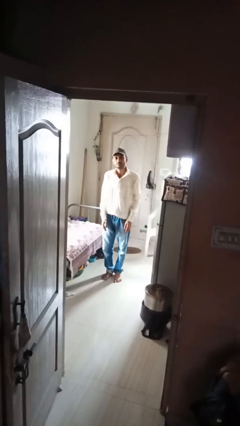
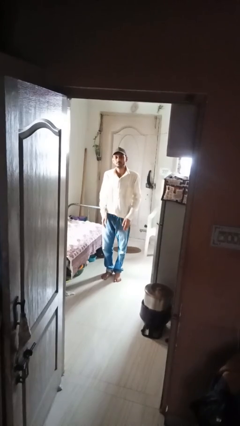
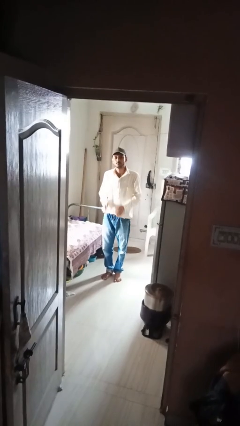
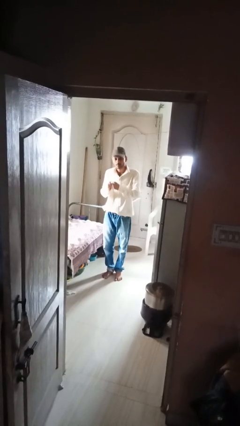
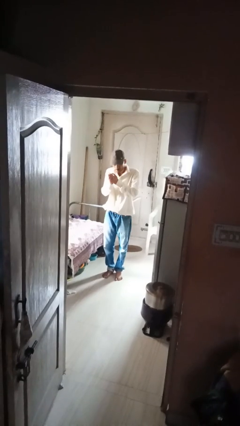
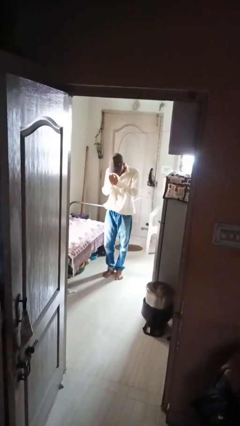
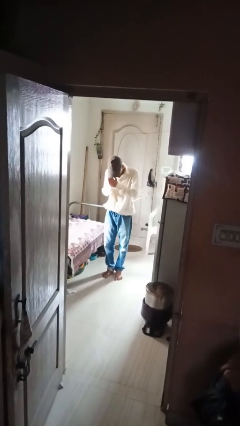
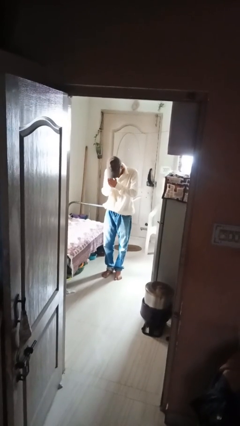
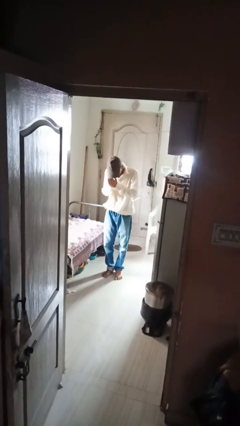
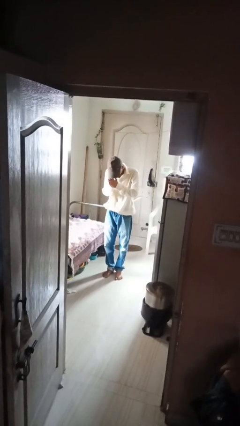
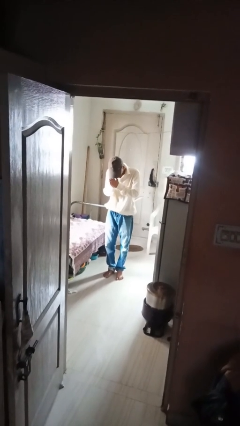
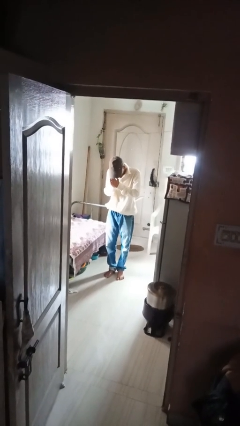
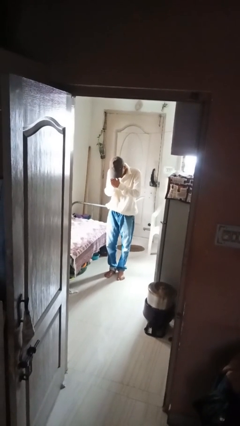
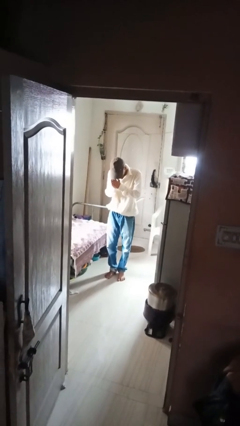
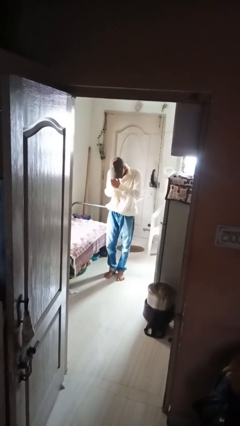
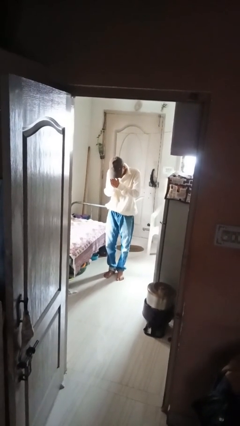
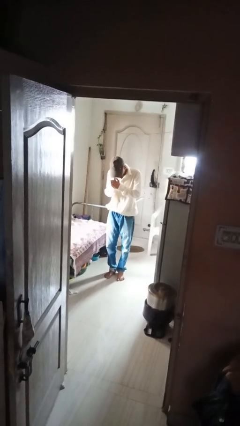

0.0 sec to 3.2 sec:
person prays

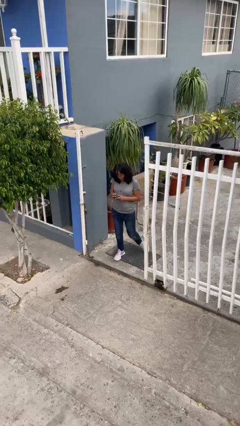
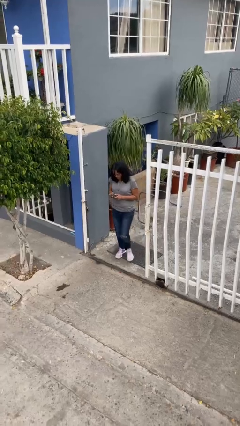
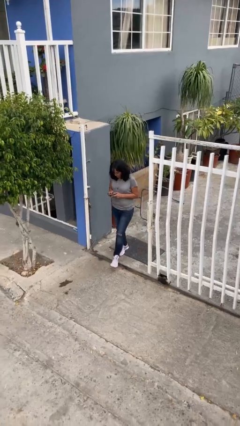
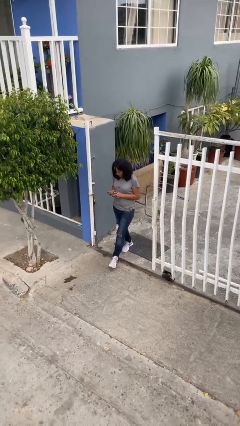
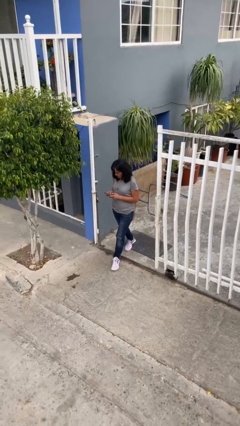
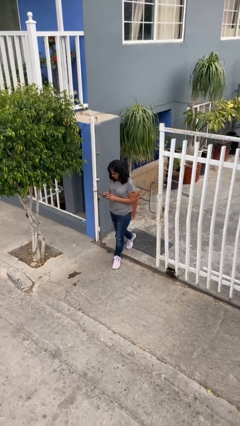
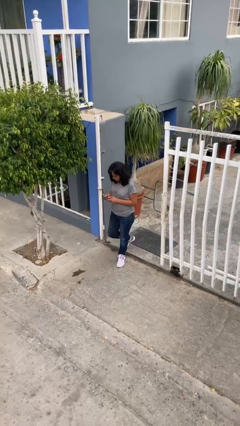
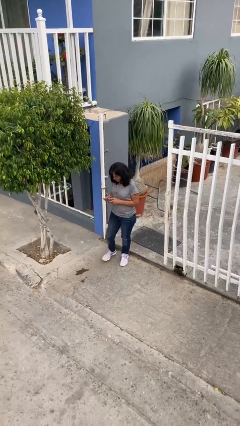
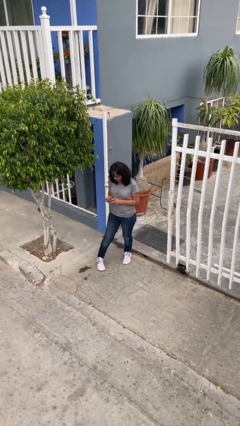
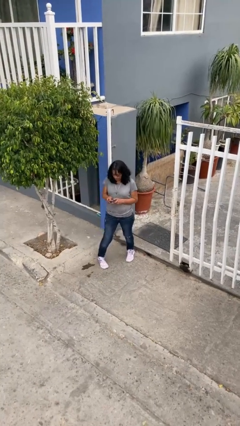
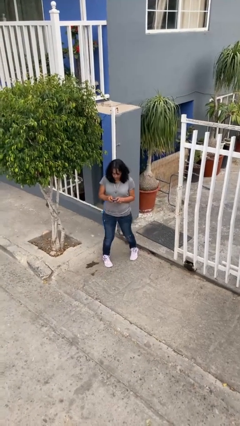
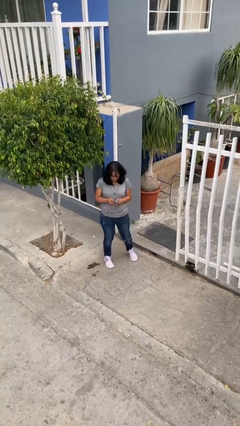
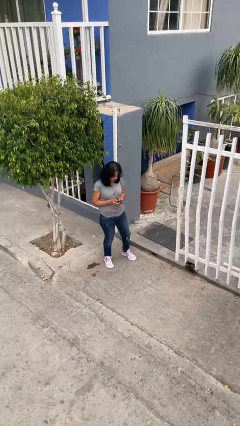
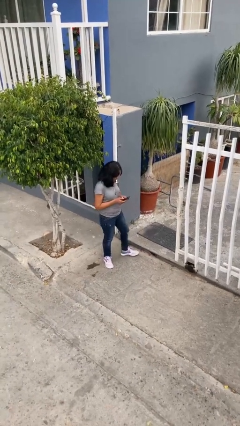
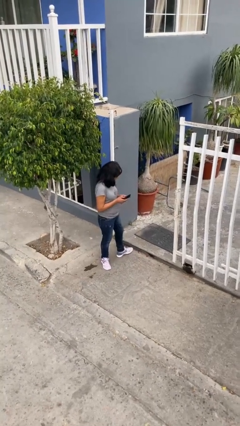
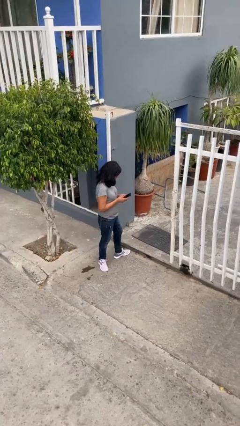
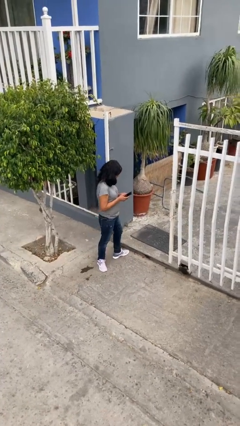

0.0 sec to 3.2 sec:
person enters scene through structure

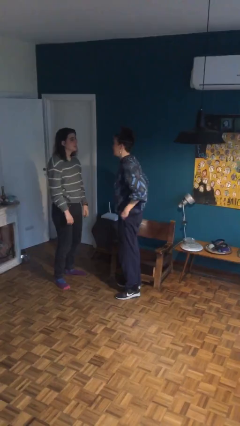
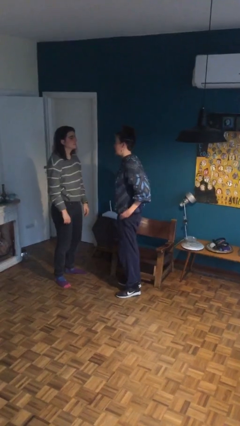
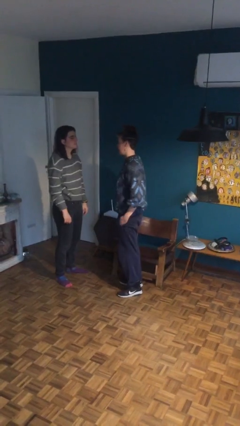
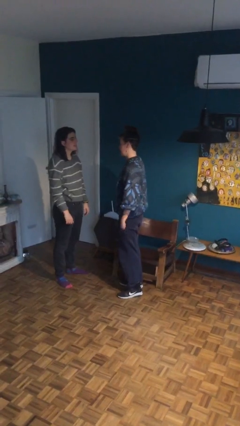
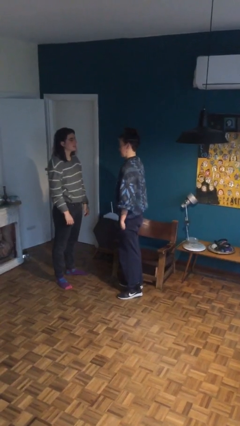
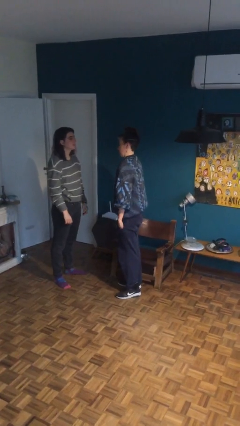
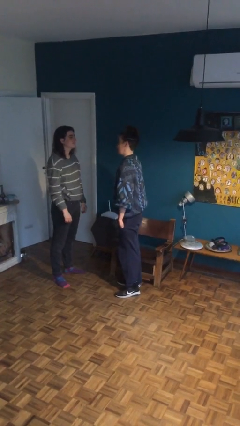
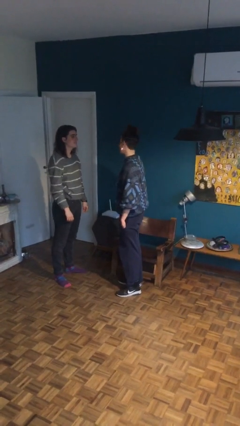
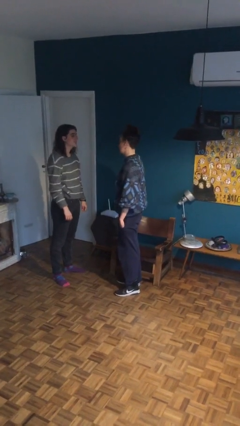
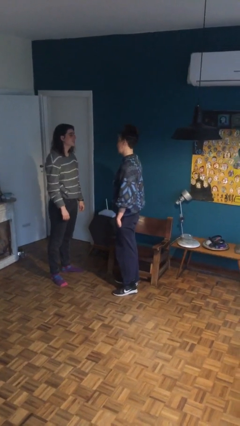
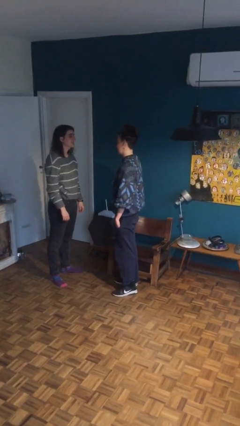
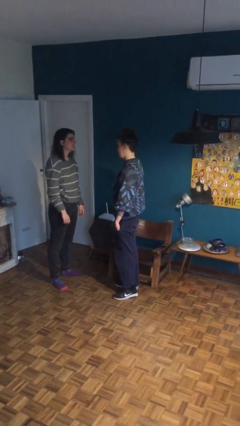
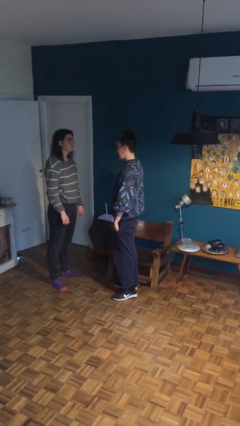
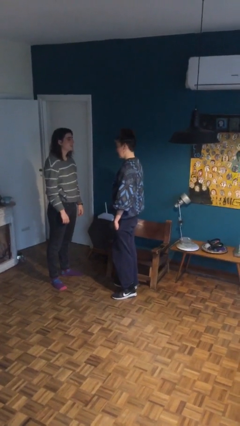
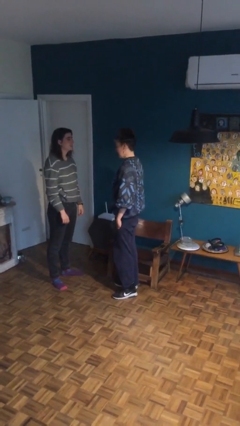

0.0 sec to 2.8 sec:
person talks to person

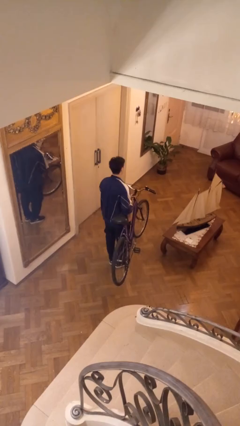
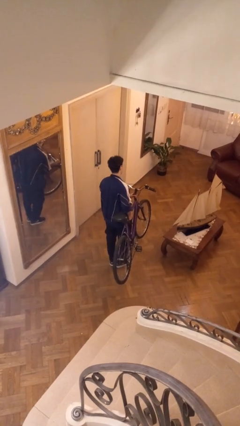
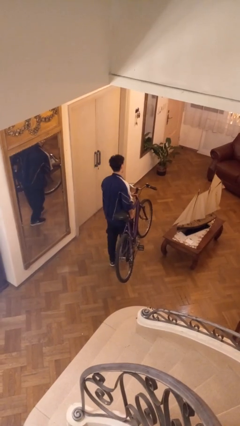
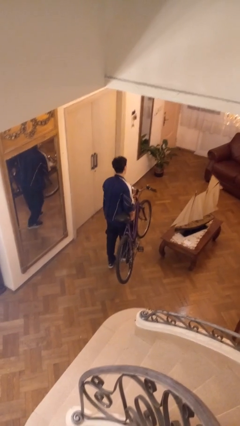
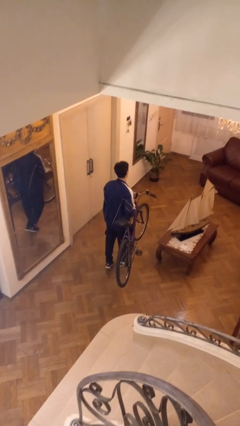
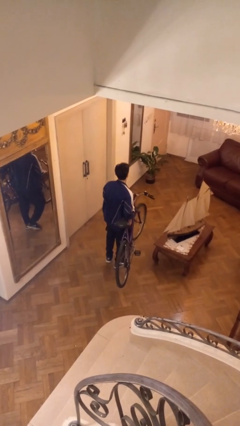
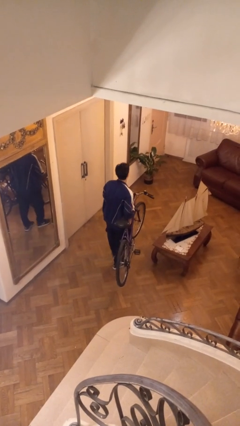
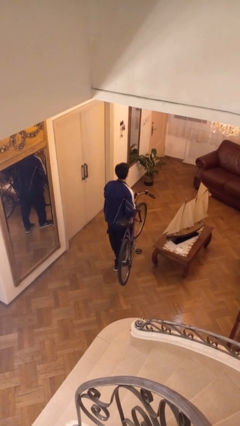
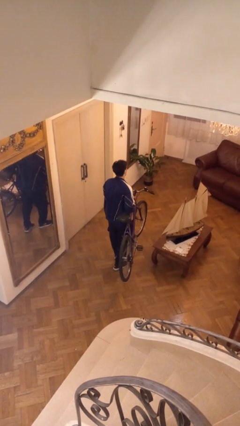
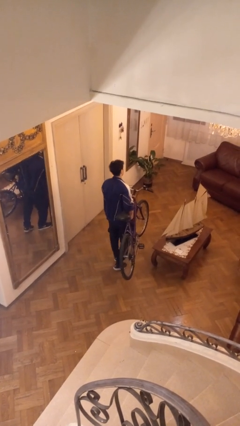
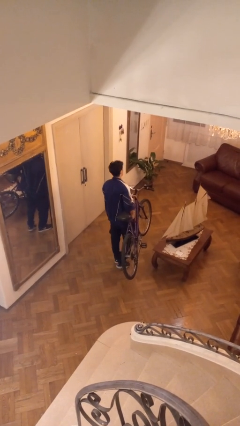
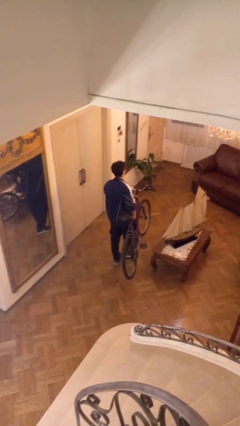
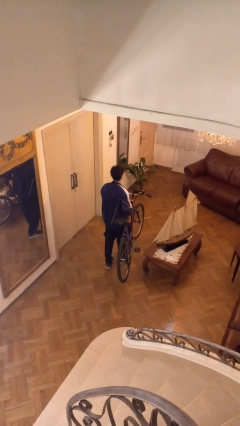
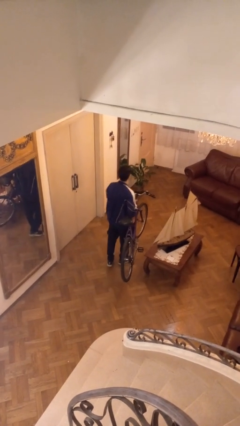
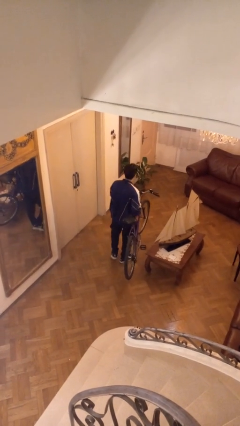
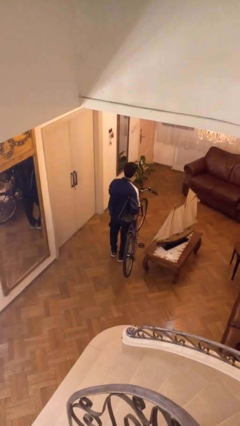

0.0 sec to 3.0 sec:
person carries bicycle

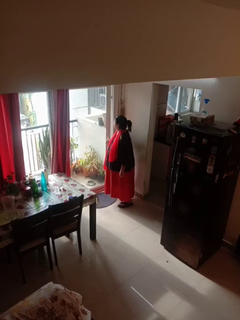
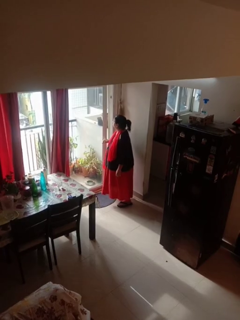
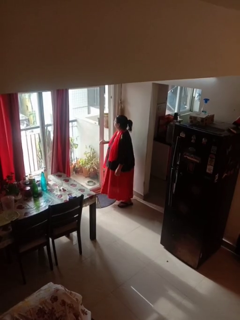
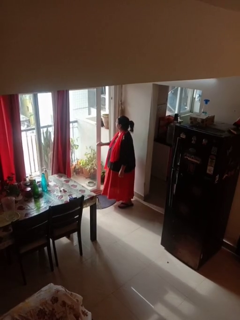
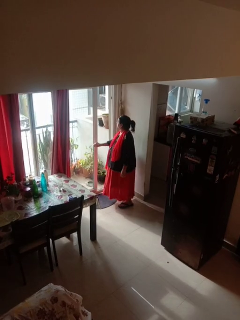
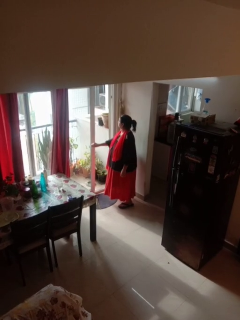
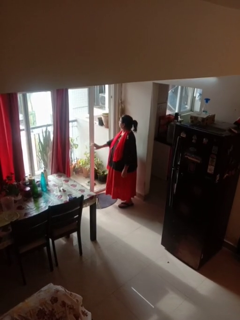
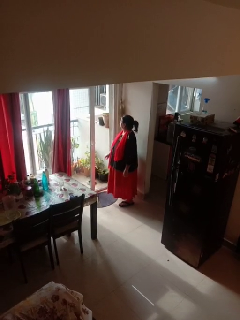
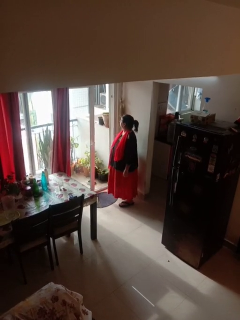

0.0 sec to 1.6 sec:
person opens home window

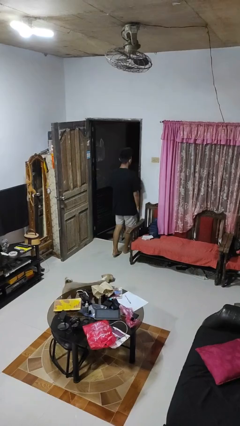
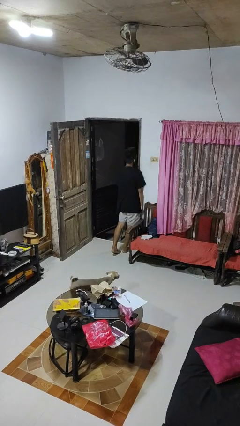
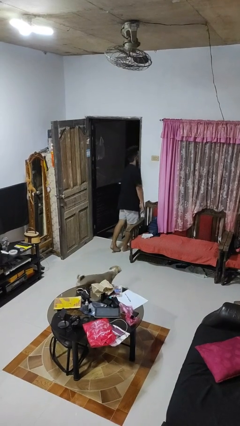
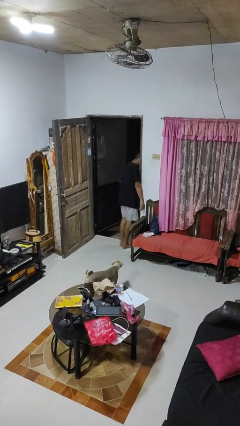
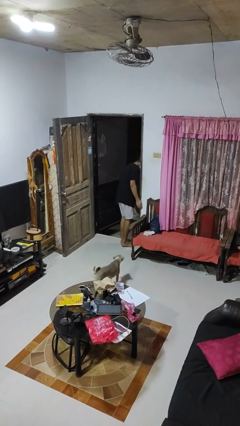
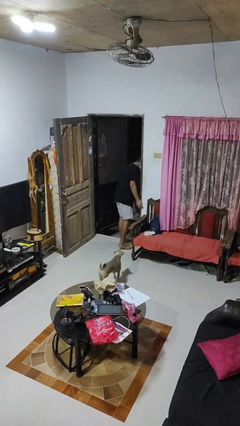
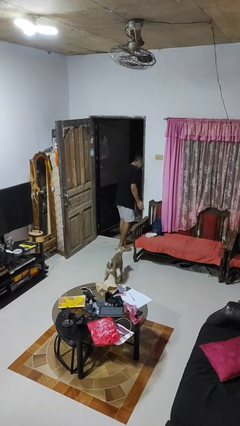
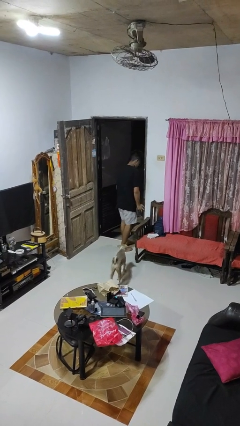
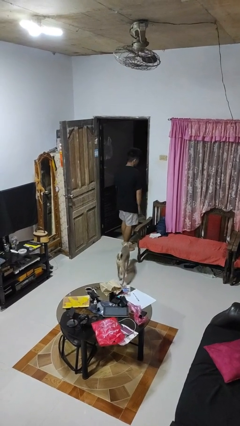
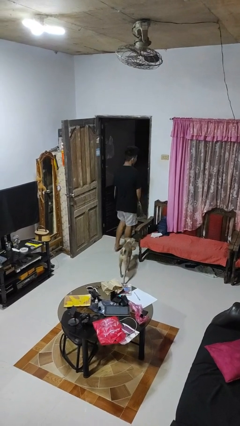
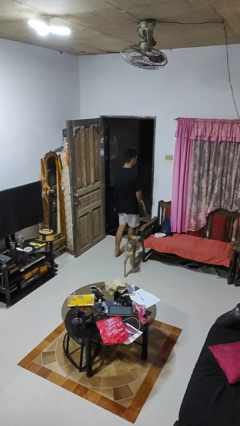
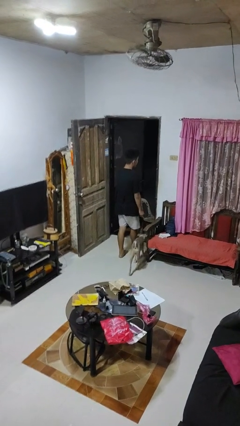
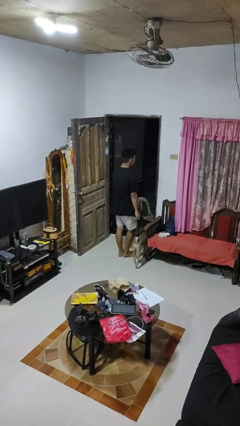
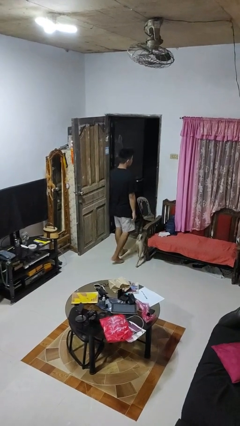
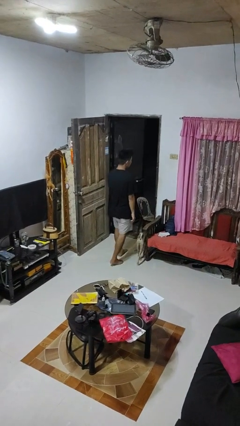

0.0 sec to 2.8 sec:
person bumps into wall

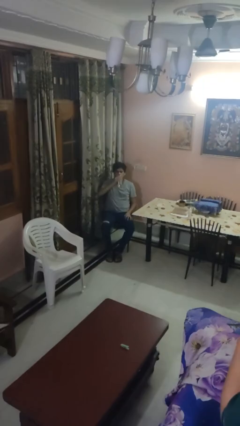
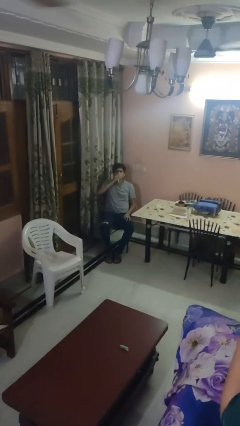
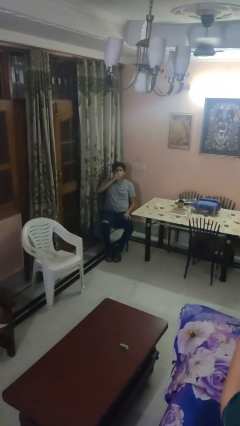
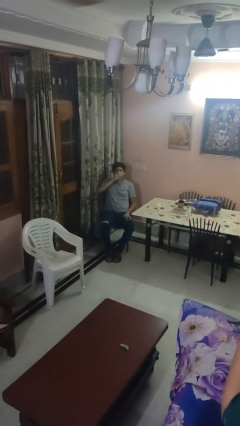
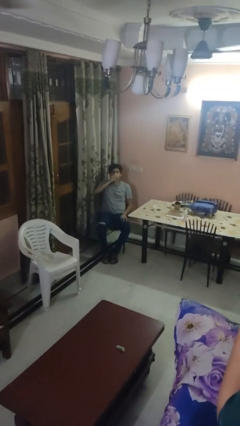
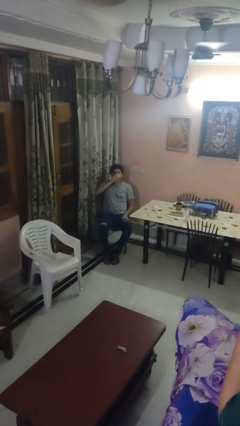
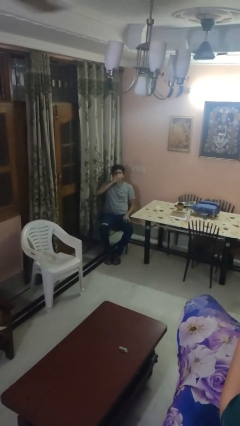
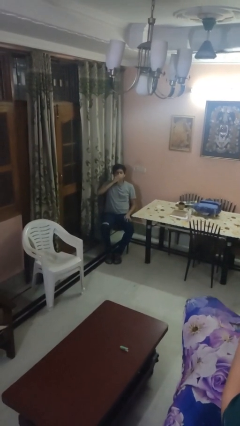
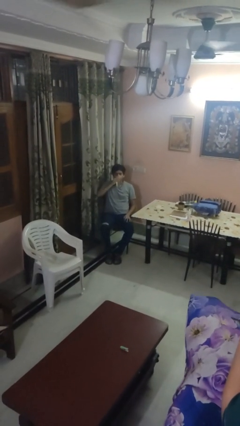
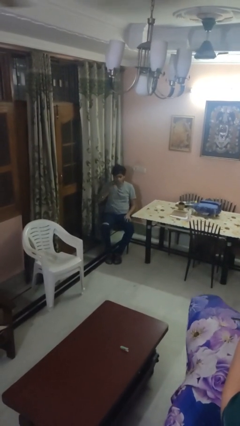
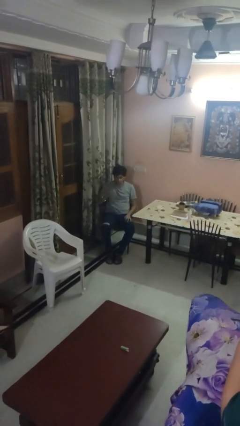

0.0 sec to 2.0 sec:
person drinks from bottle
